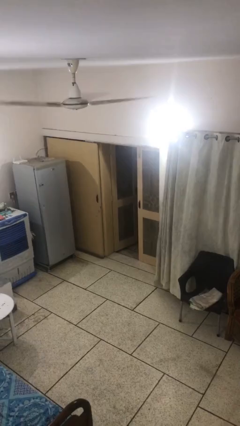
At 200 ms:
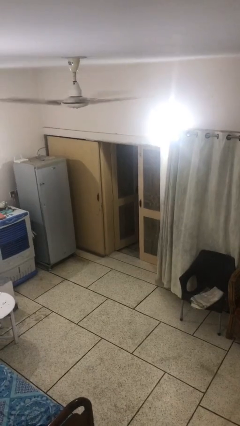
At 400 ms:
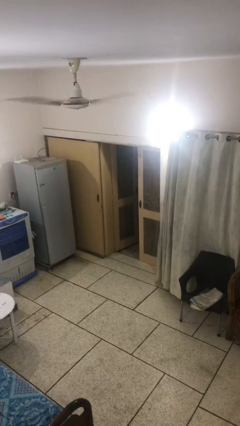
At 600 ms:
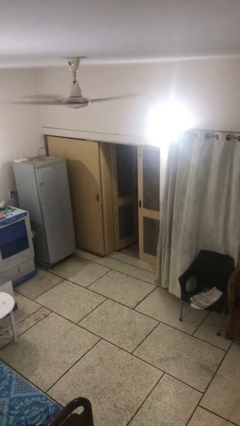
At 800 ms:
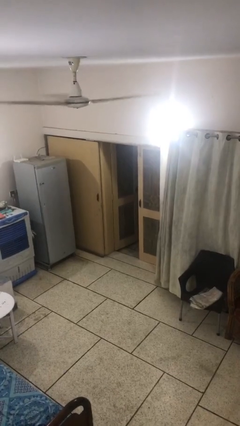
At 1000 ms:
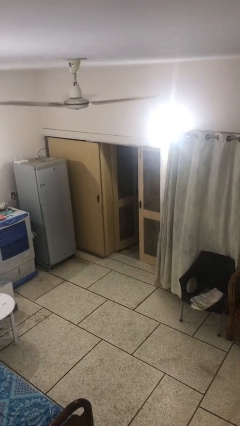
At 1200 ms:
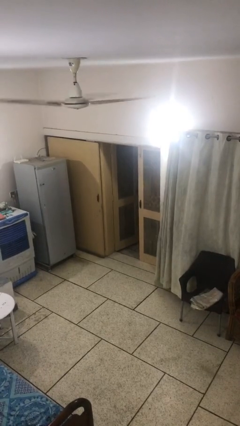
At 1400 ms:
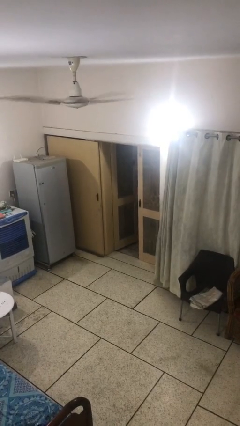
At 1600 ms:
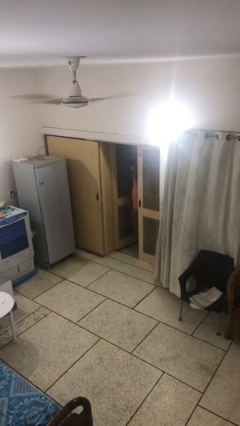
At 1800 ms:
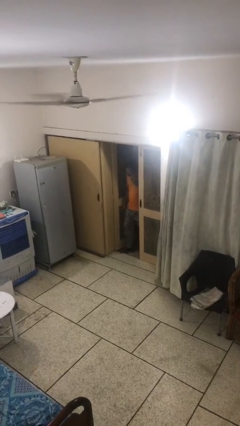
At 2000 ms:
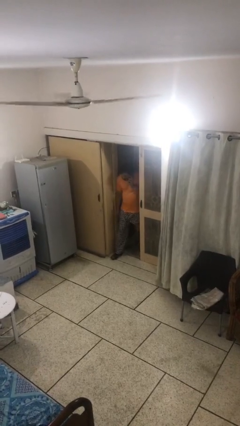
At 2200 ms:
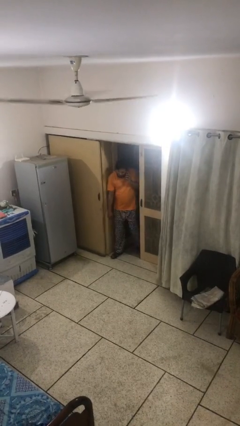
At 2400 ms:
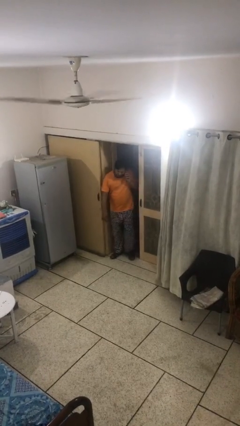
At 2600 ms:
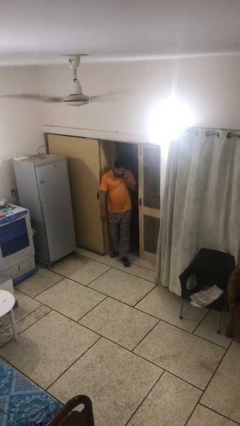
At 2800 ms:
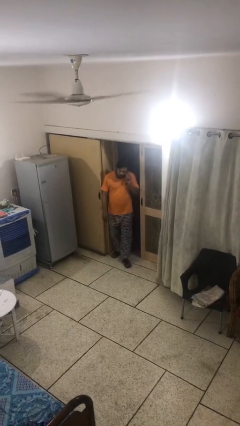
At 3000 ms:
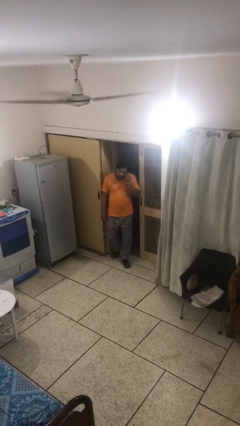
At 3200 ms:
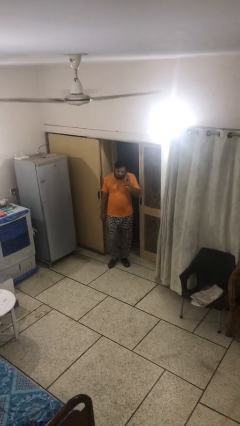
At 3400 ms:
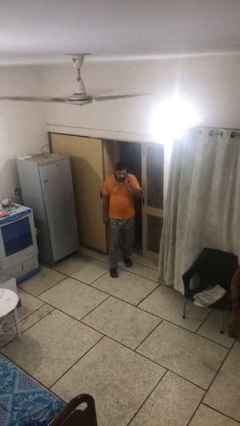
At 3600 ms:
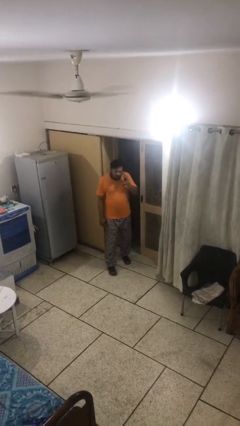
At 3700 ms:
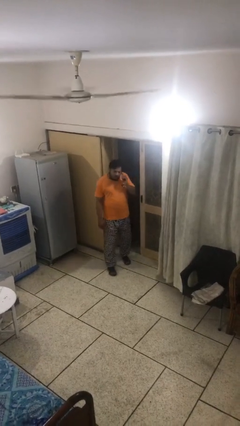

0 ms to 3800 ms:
person enters scene through structure

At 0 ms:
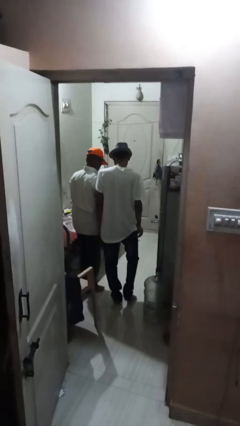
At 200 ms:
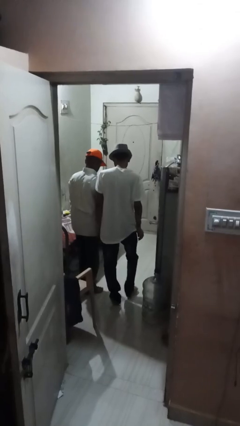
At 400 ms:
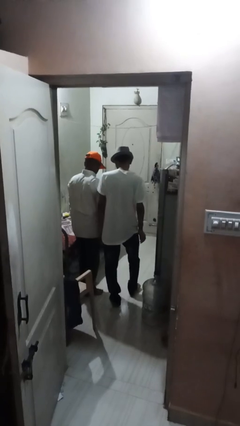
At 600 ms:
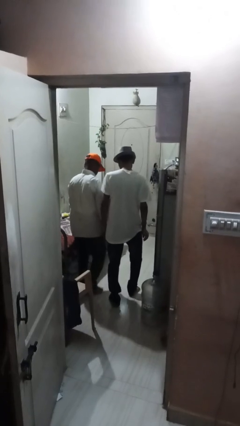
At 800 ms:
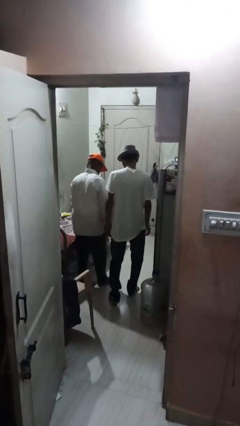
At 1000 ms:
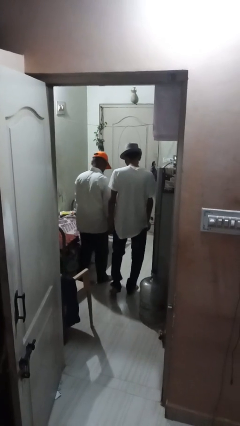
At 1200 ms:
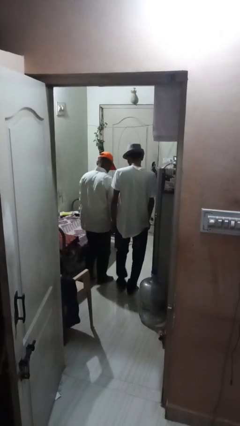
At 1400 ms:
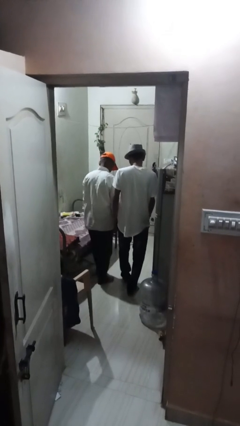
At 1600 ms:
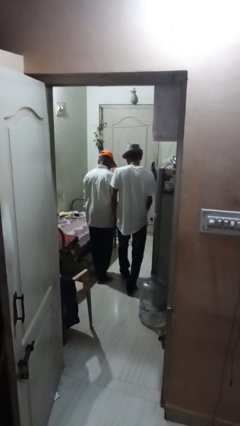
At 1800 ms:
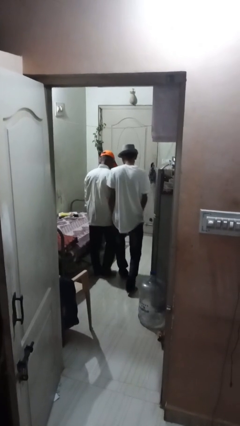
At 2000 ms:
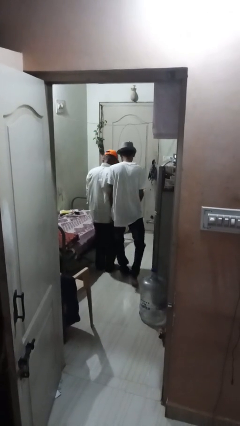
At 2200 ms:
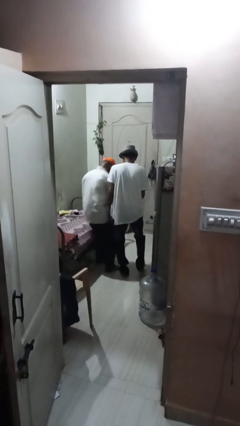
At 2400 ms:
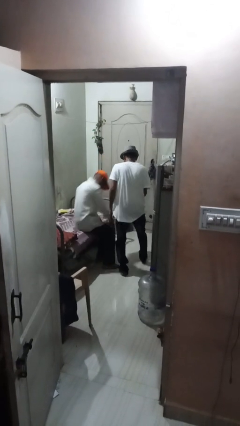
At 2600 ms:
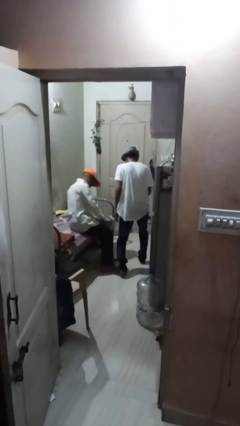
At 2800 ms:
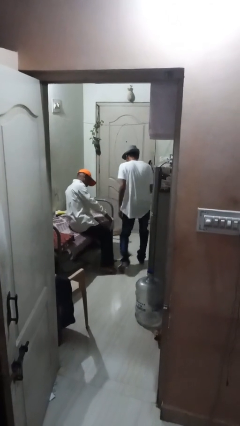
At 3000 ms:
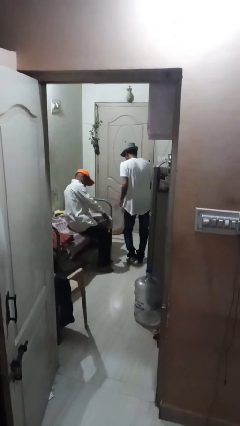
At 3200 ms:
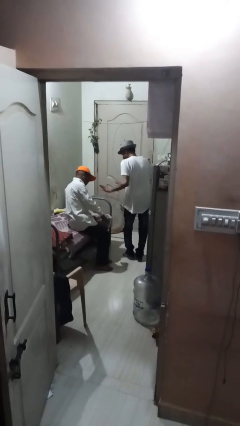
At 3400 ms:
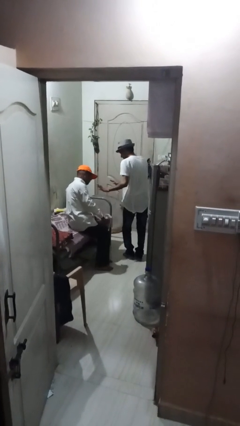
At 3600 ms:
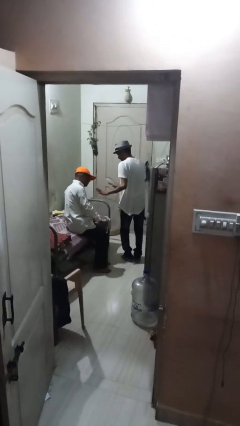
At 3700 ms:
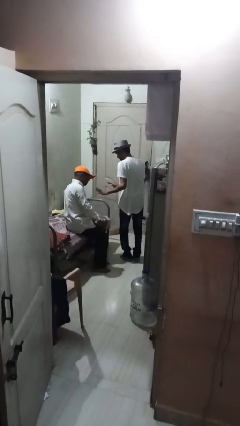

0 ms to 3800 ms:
person bumps into person

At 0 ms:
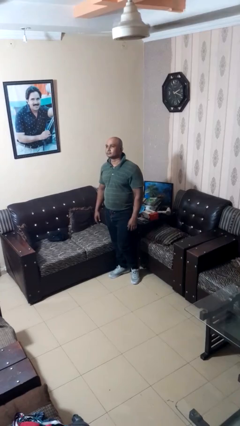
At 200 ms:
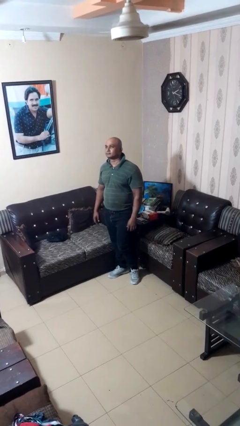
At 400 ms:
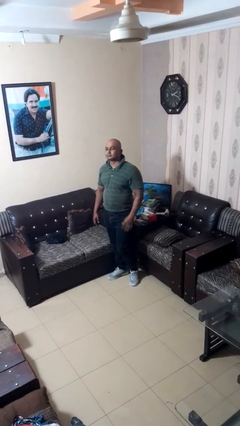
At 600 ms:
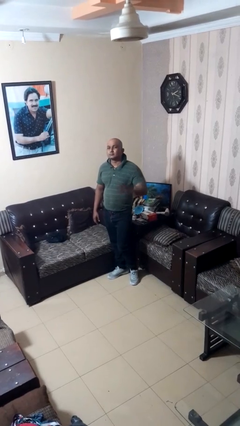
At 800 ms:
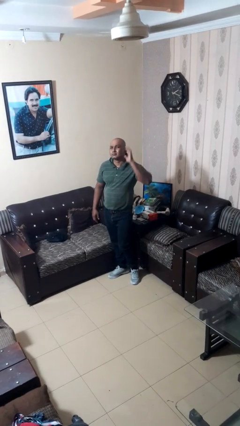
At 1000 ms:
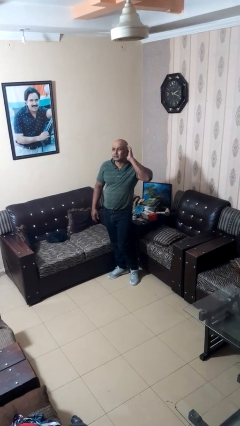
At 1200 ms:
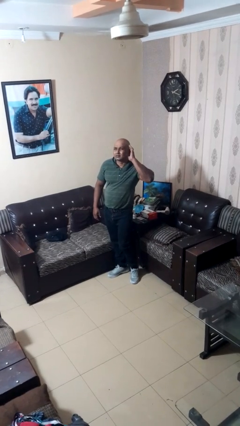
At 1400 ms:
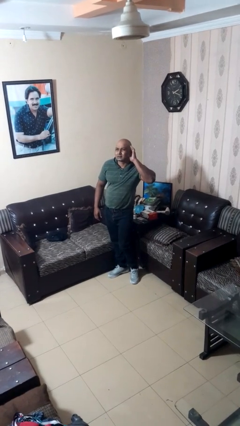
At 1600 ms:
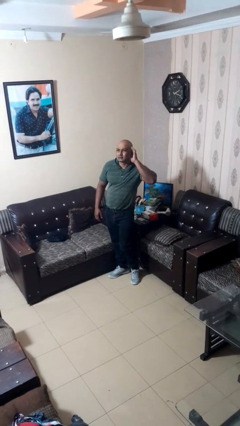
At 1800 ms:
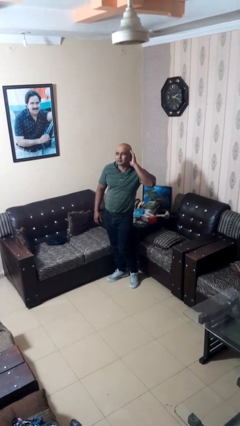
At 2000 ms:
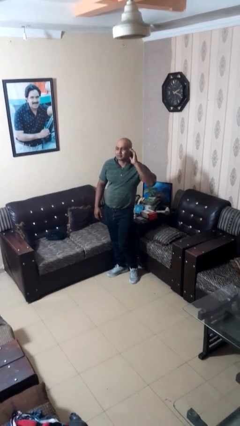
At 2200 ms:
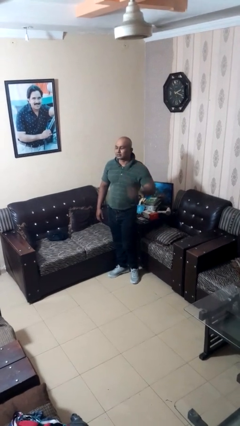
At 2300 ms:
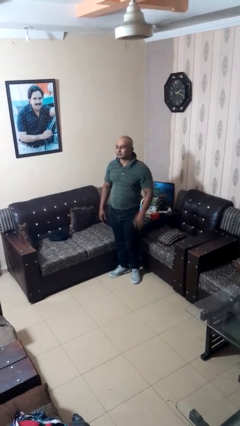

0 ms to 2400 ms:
person gestures listen closely

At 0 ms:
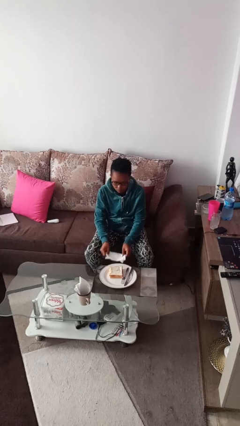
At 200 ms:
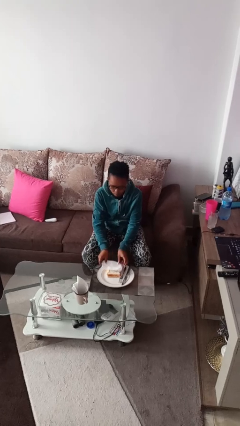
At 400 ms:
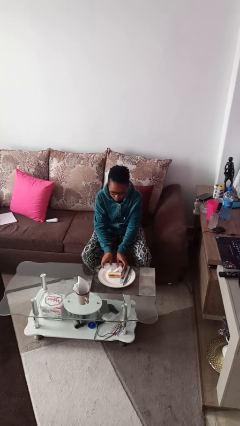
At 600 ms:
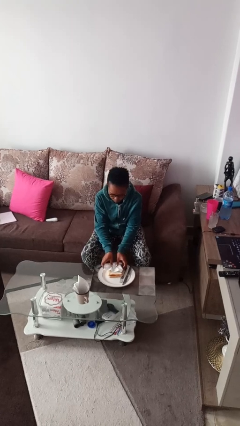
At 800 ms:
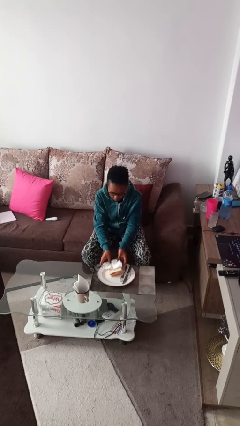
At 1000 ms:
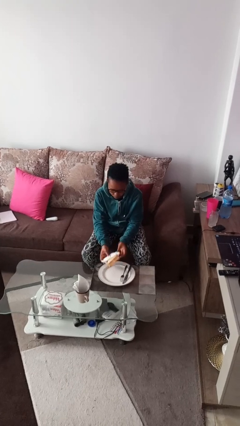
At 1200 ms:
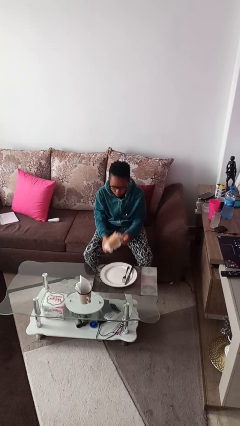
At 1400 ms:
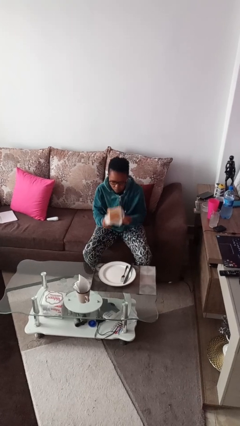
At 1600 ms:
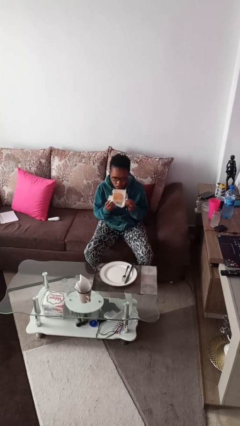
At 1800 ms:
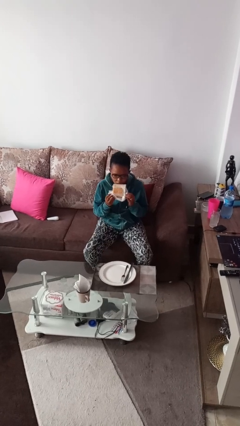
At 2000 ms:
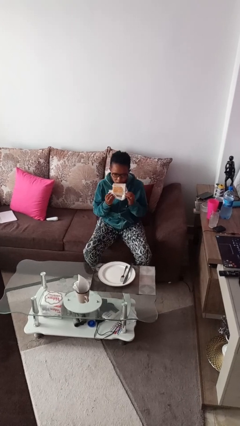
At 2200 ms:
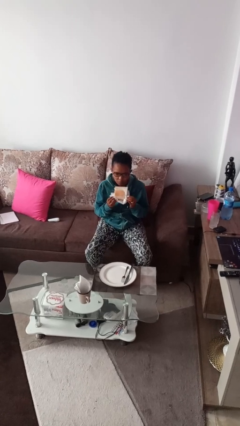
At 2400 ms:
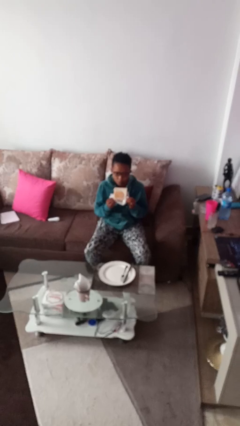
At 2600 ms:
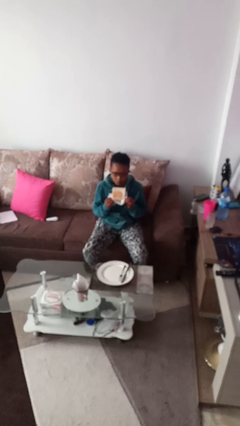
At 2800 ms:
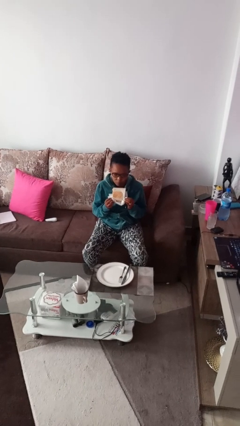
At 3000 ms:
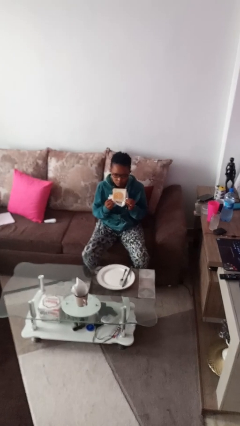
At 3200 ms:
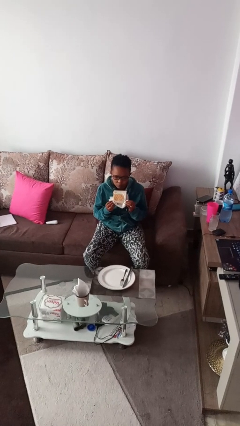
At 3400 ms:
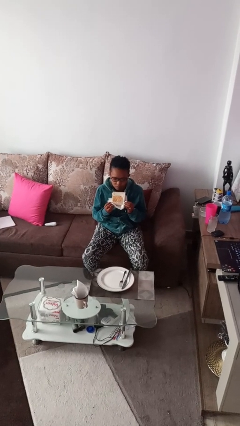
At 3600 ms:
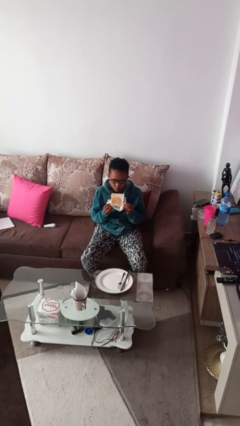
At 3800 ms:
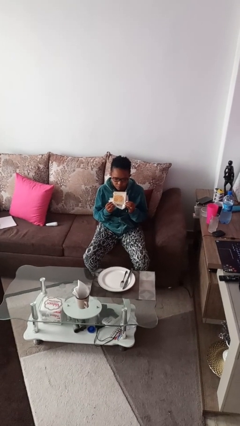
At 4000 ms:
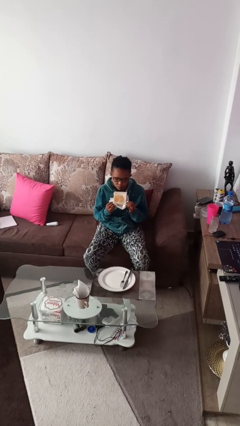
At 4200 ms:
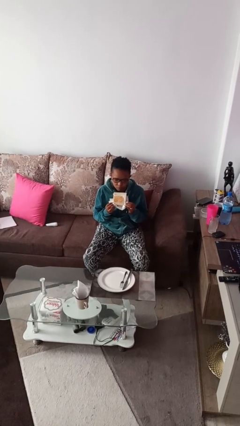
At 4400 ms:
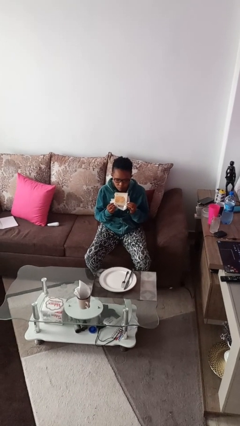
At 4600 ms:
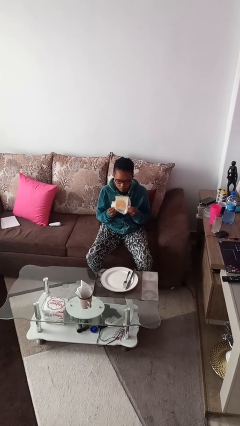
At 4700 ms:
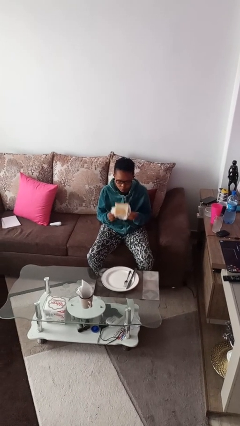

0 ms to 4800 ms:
person eats with hands

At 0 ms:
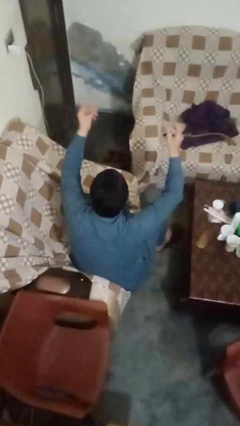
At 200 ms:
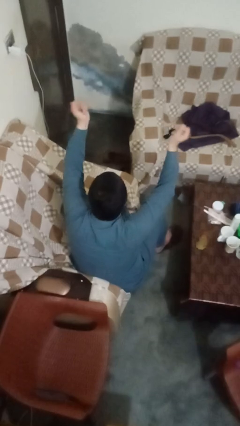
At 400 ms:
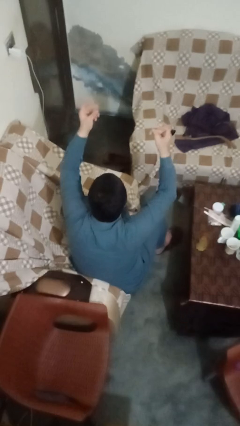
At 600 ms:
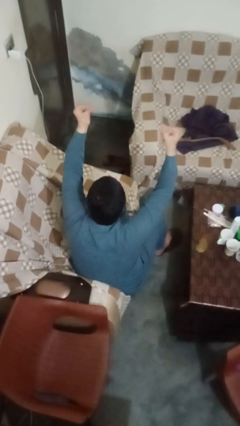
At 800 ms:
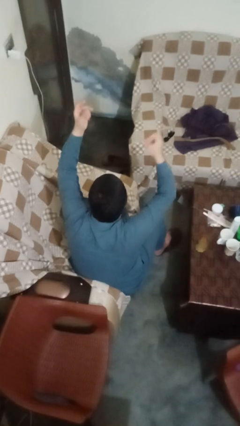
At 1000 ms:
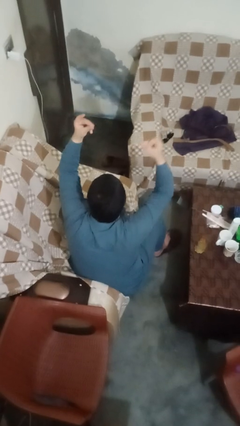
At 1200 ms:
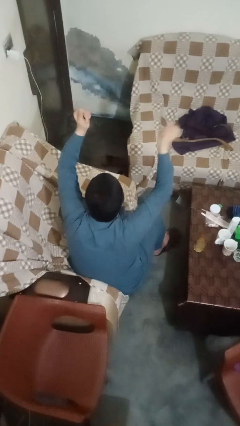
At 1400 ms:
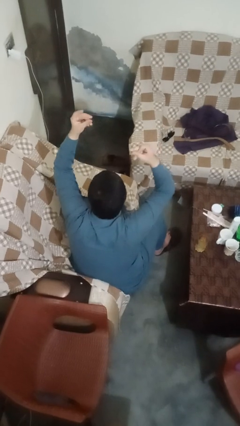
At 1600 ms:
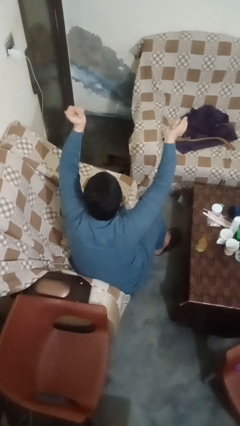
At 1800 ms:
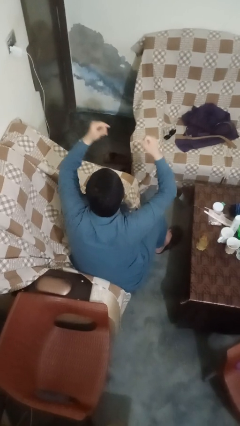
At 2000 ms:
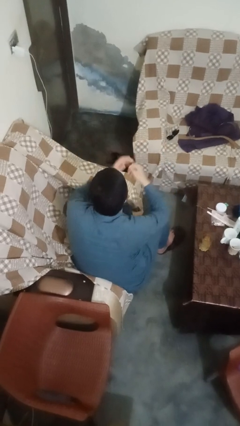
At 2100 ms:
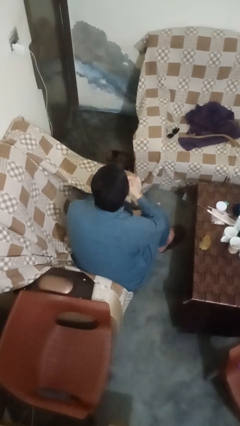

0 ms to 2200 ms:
person snaps fingers

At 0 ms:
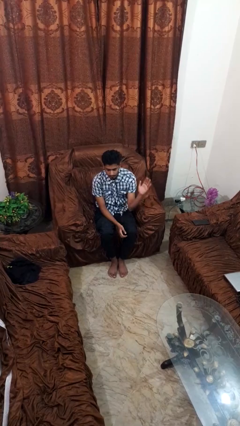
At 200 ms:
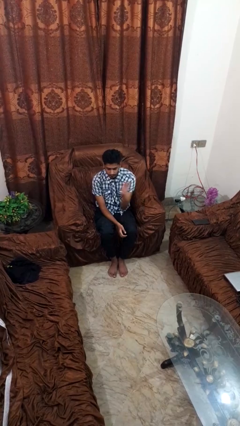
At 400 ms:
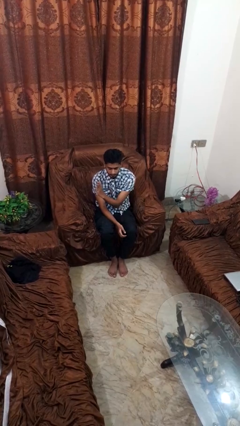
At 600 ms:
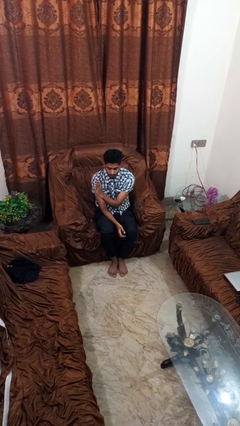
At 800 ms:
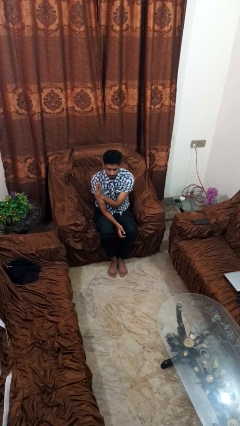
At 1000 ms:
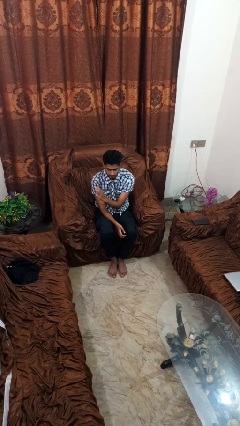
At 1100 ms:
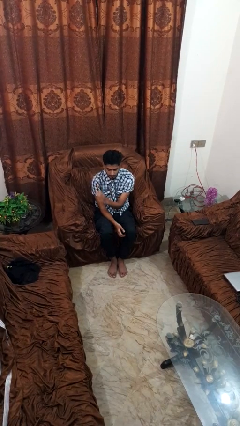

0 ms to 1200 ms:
person gestures swipe right
